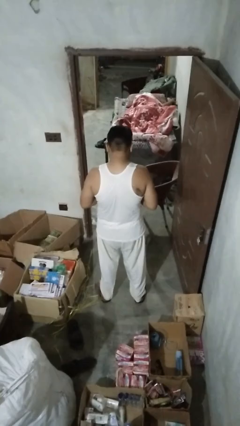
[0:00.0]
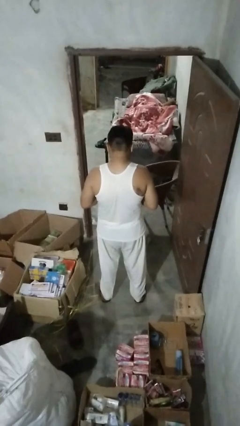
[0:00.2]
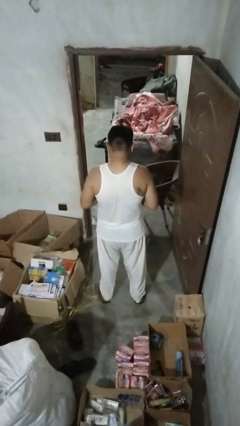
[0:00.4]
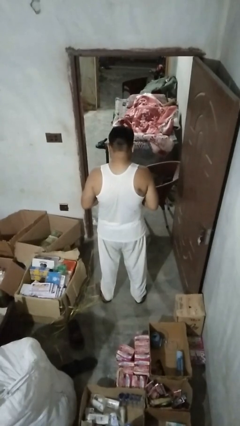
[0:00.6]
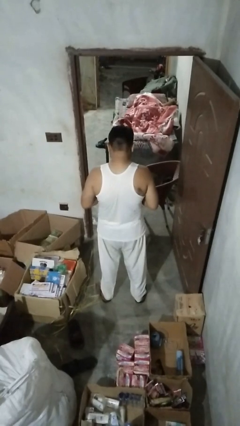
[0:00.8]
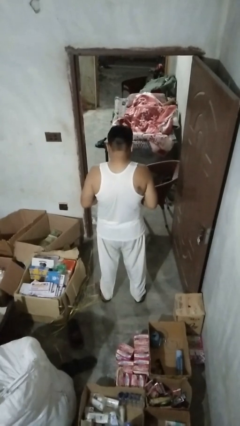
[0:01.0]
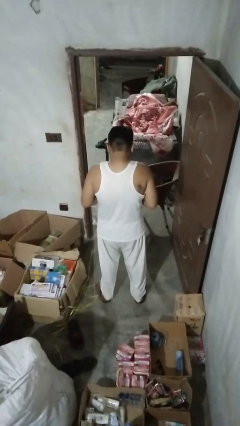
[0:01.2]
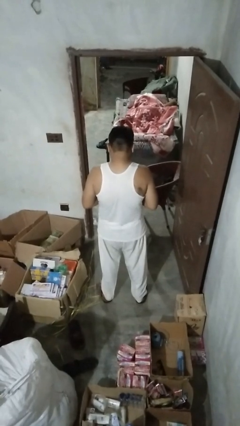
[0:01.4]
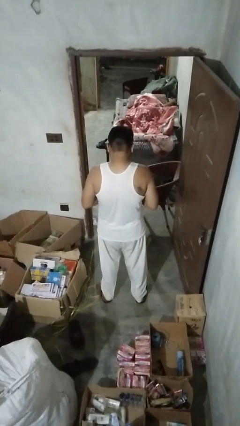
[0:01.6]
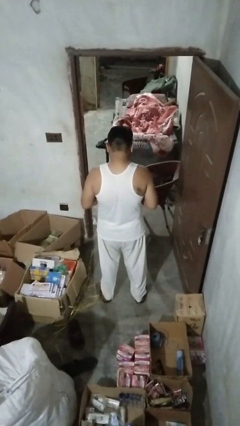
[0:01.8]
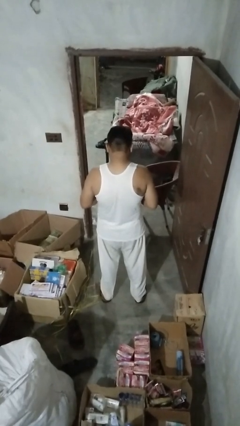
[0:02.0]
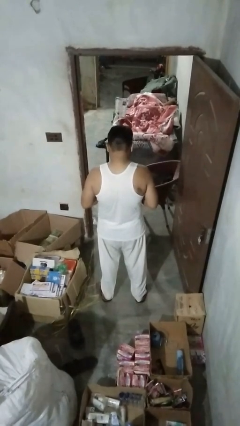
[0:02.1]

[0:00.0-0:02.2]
person shrugs

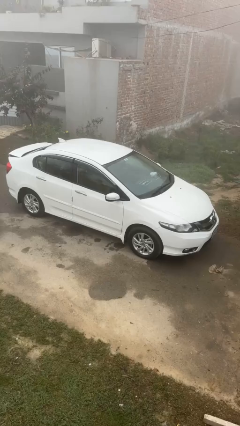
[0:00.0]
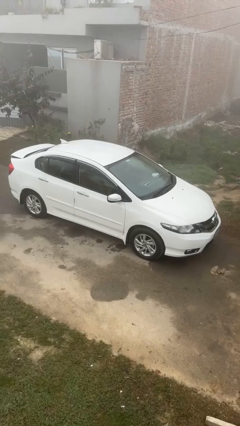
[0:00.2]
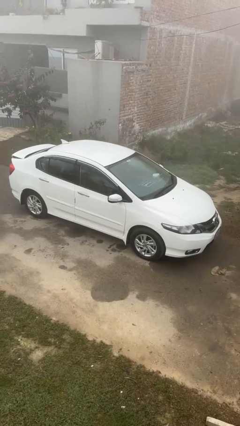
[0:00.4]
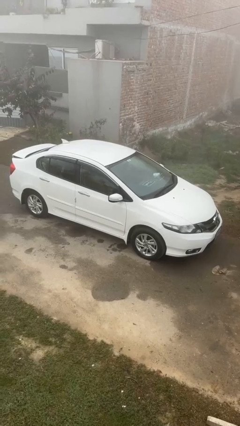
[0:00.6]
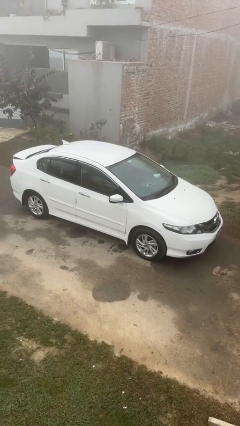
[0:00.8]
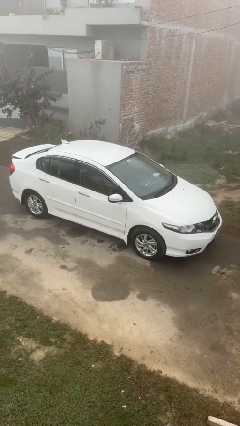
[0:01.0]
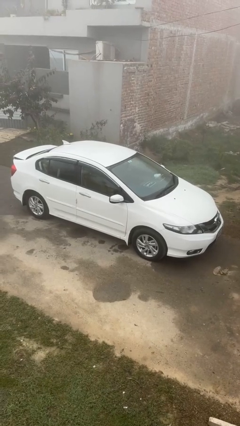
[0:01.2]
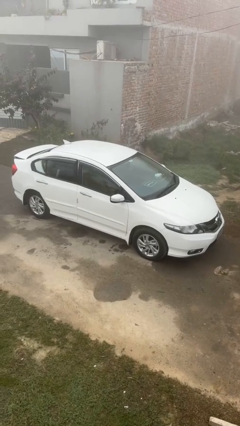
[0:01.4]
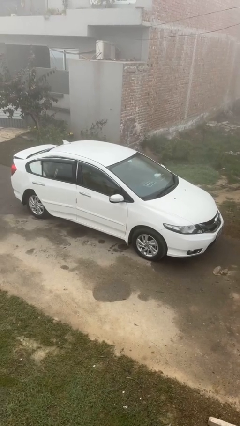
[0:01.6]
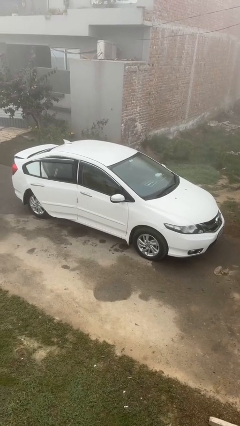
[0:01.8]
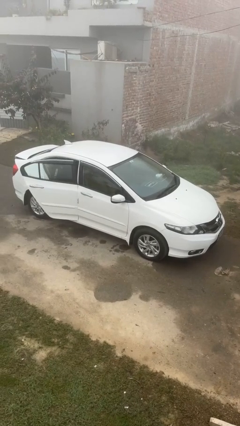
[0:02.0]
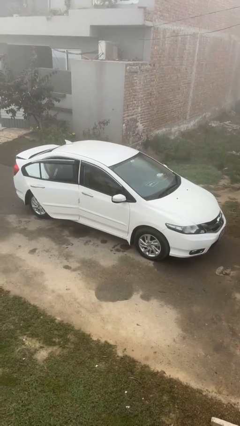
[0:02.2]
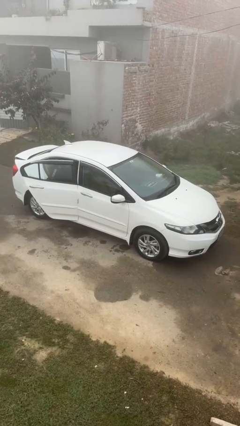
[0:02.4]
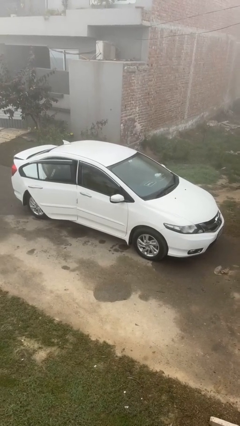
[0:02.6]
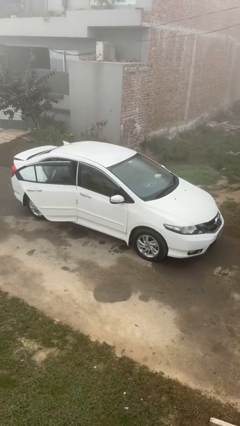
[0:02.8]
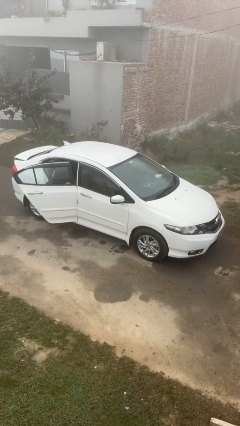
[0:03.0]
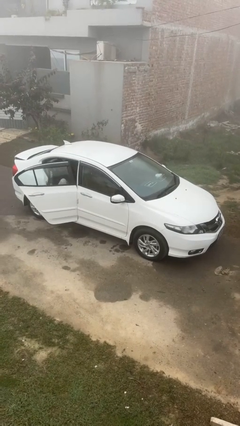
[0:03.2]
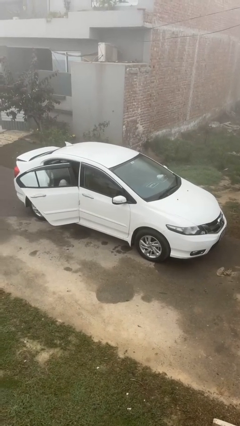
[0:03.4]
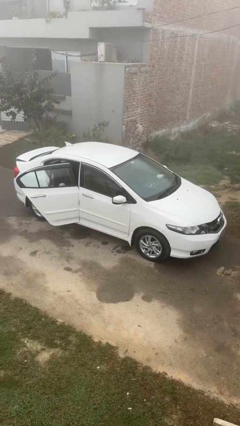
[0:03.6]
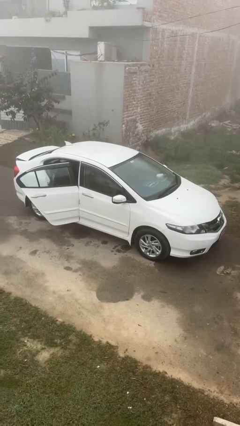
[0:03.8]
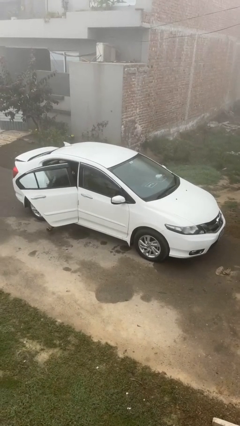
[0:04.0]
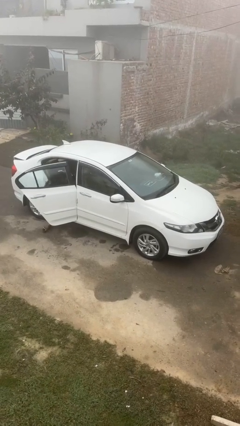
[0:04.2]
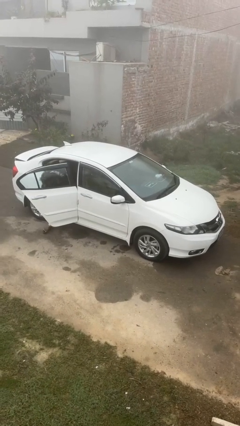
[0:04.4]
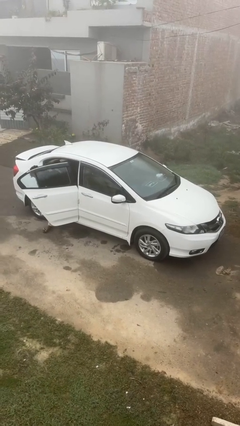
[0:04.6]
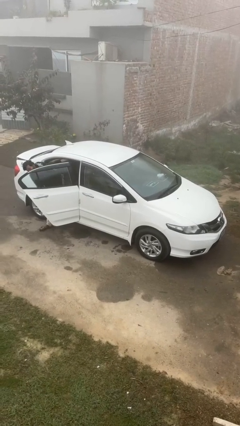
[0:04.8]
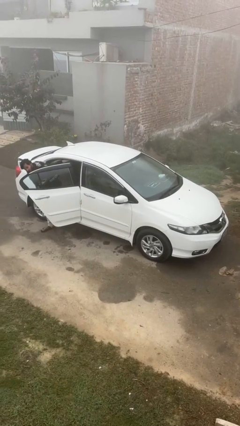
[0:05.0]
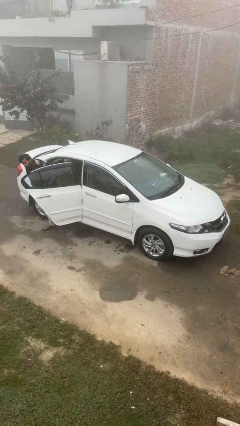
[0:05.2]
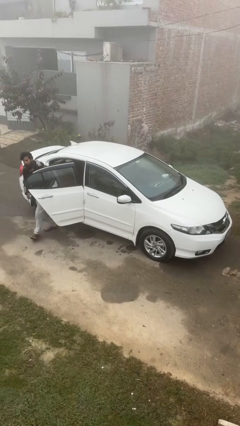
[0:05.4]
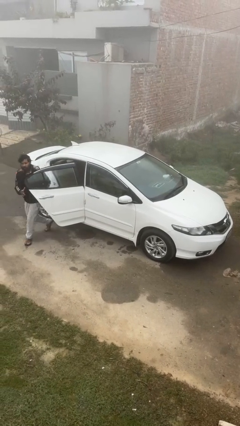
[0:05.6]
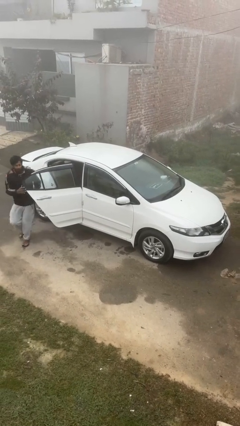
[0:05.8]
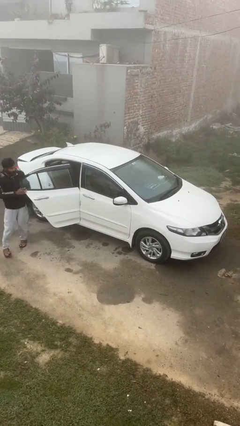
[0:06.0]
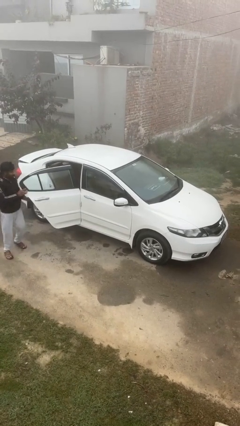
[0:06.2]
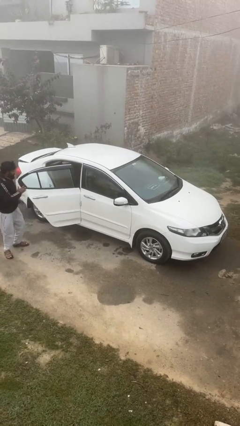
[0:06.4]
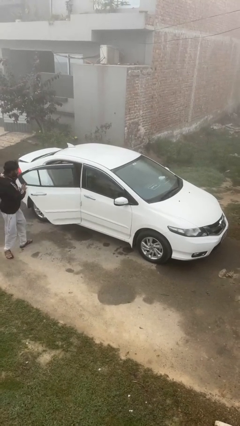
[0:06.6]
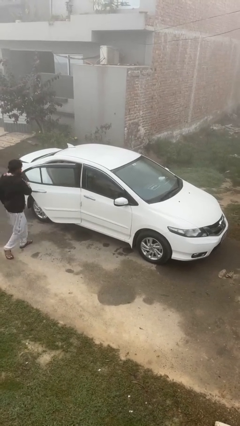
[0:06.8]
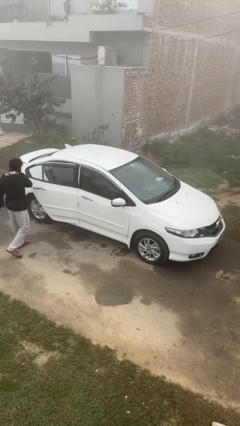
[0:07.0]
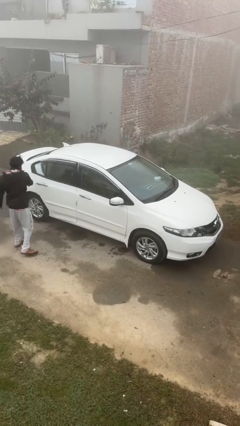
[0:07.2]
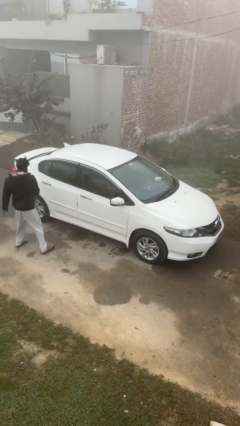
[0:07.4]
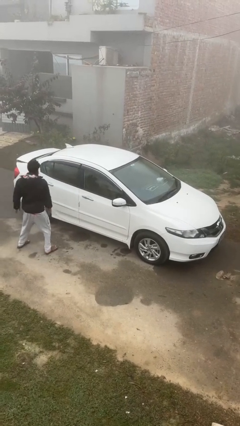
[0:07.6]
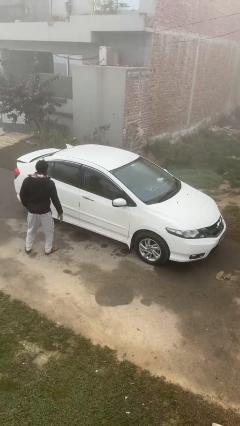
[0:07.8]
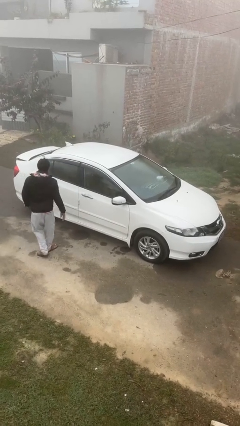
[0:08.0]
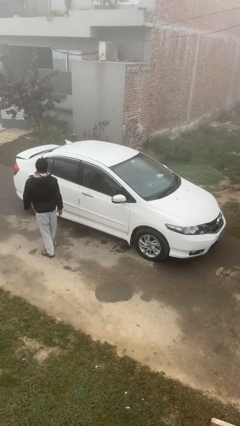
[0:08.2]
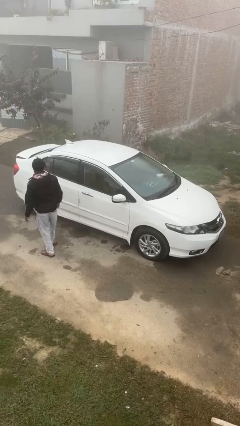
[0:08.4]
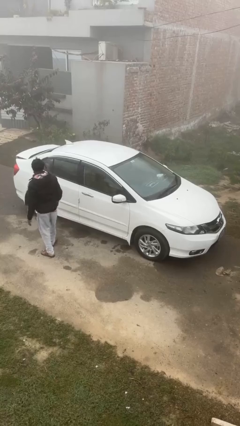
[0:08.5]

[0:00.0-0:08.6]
car drops off person

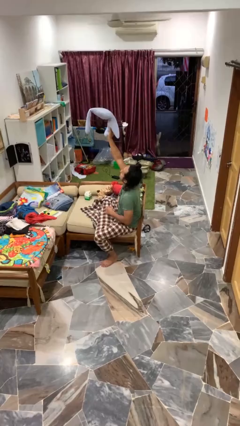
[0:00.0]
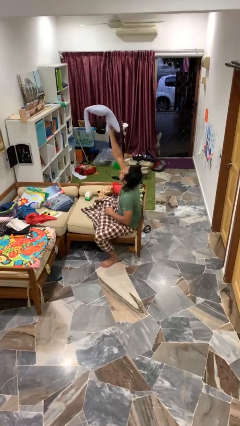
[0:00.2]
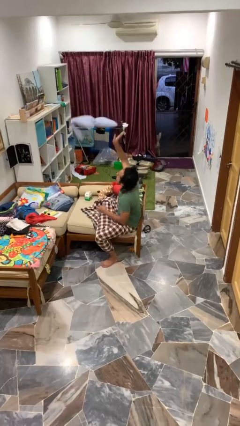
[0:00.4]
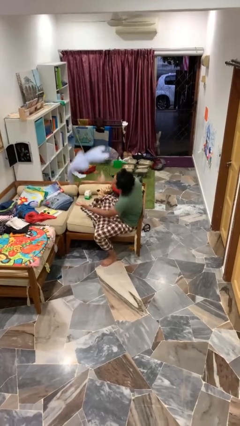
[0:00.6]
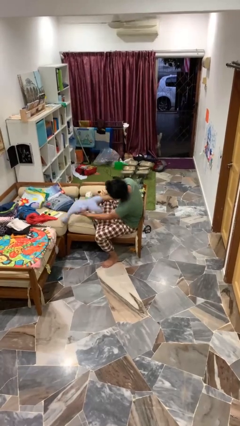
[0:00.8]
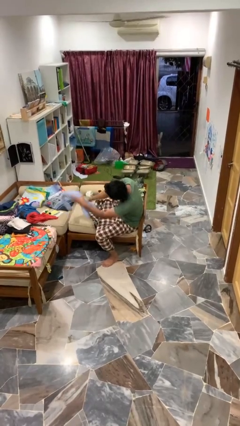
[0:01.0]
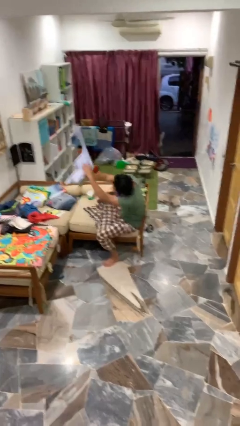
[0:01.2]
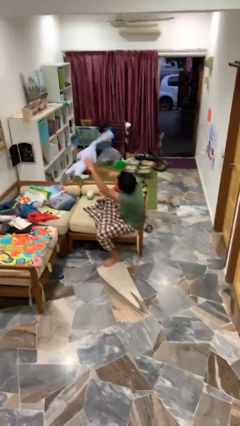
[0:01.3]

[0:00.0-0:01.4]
person drops object

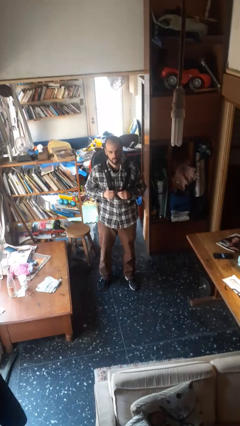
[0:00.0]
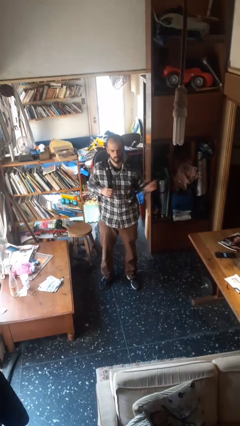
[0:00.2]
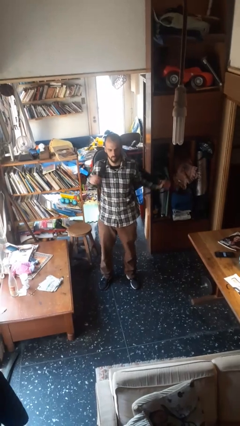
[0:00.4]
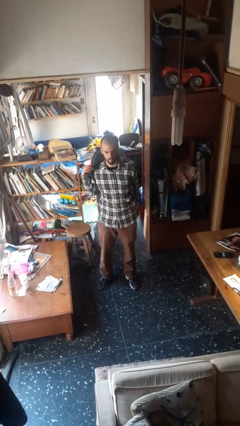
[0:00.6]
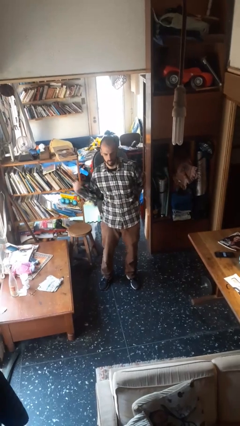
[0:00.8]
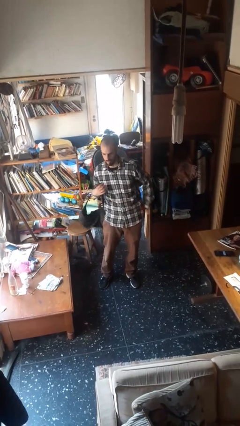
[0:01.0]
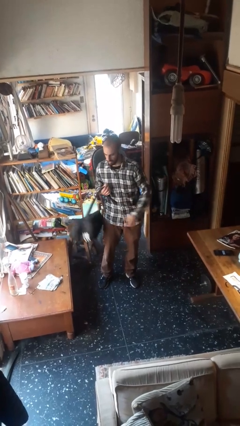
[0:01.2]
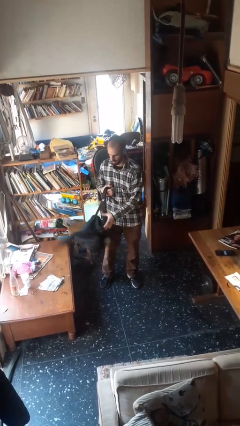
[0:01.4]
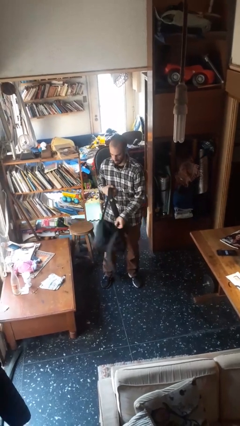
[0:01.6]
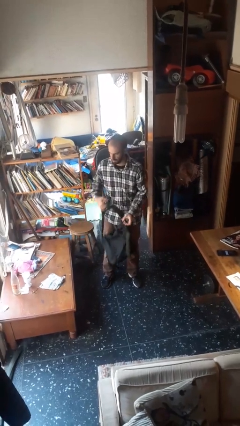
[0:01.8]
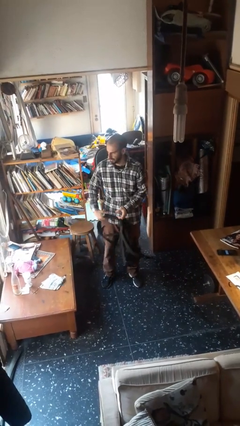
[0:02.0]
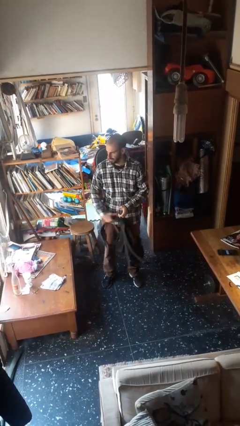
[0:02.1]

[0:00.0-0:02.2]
person takes off backpack

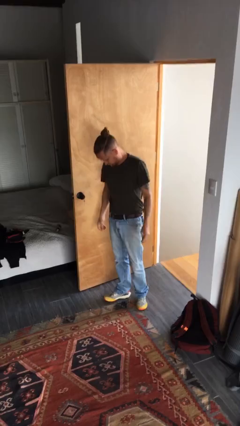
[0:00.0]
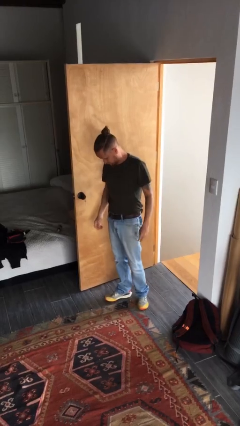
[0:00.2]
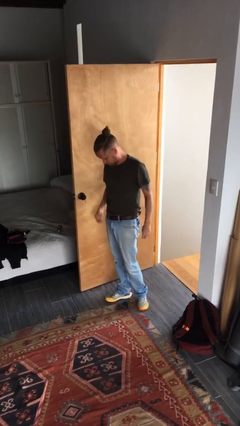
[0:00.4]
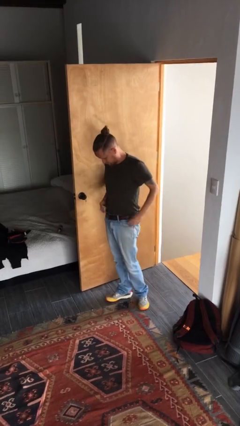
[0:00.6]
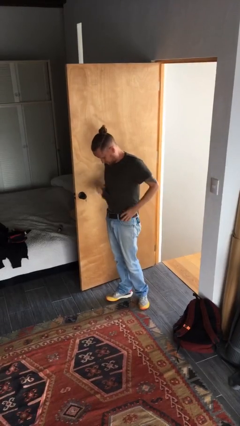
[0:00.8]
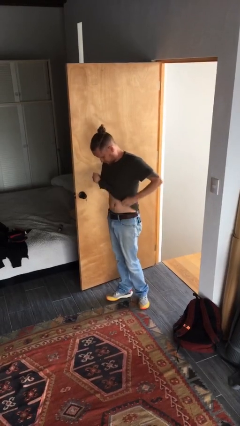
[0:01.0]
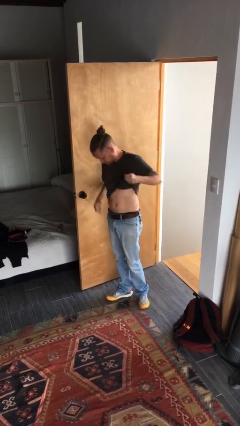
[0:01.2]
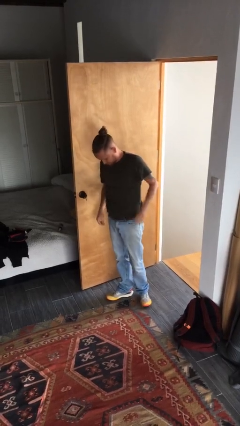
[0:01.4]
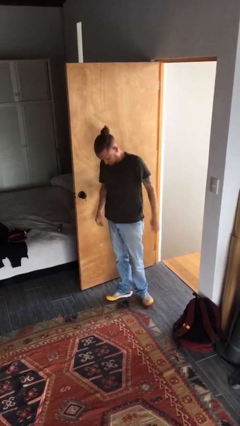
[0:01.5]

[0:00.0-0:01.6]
person untucks shirt

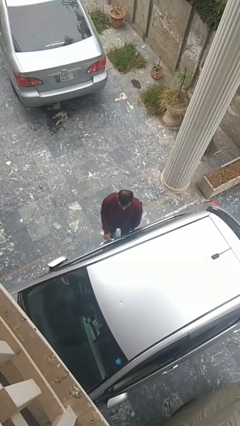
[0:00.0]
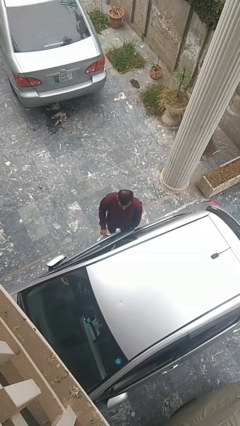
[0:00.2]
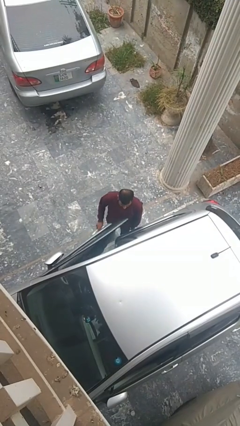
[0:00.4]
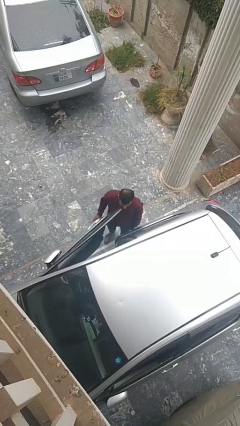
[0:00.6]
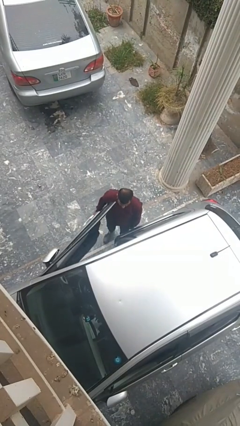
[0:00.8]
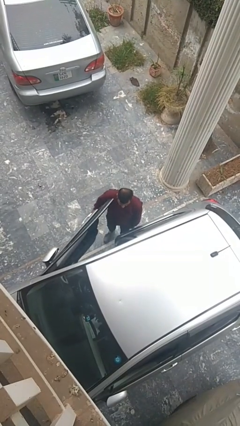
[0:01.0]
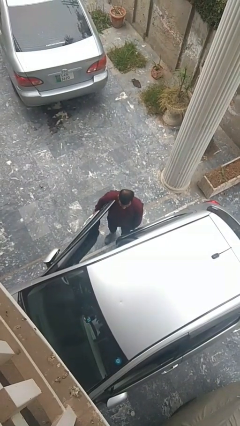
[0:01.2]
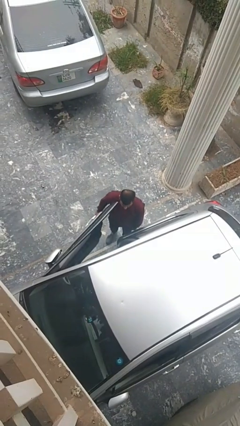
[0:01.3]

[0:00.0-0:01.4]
person opens car door

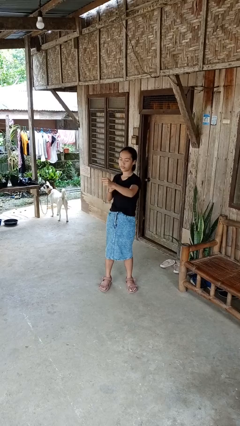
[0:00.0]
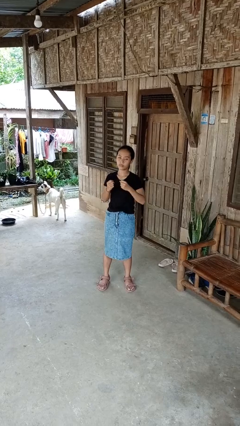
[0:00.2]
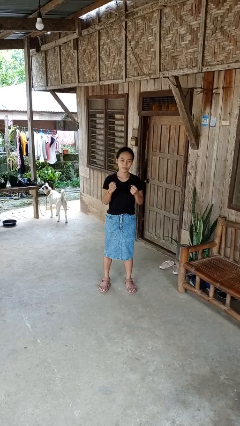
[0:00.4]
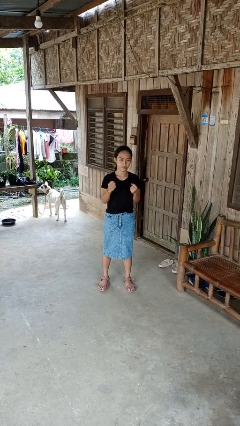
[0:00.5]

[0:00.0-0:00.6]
person punches
